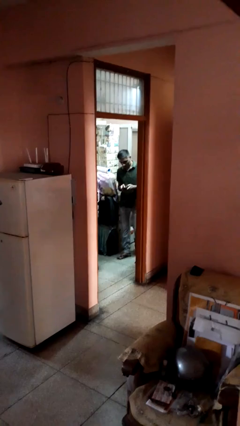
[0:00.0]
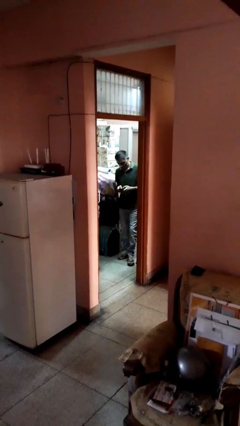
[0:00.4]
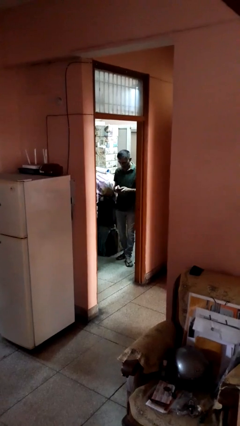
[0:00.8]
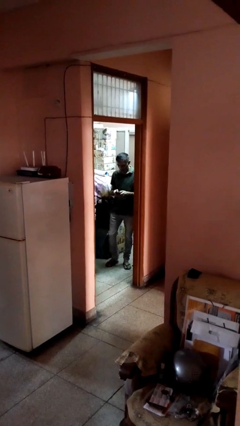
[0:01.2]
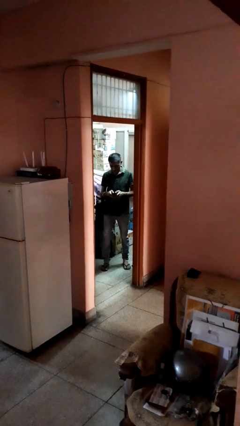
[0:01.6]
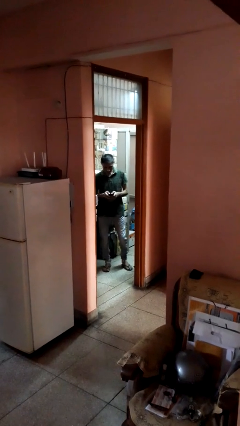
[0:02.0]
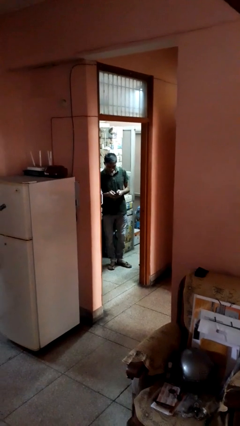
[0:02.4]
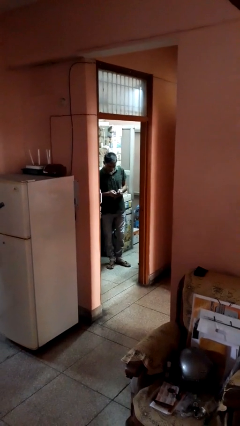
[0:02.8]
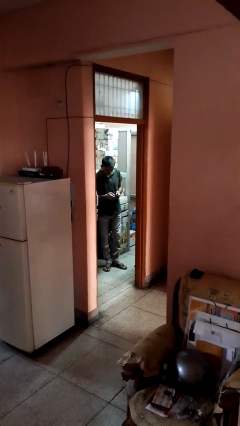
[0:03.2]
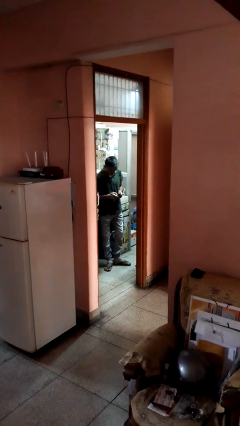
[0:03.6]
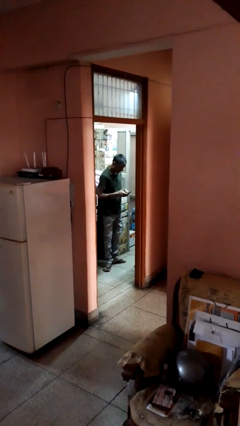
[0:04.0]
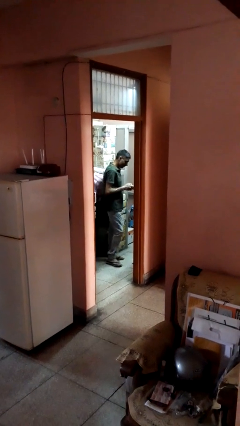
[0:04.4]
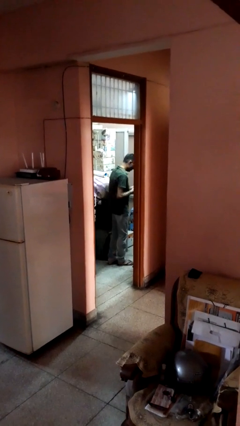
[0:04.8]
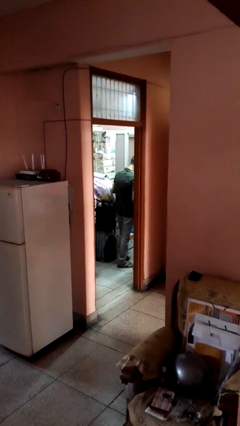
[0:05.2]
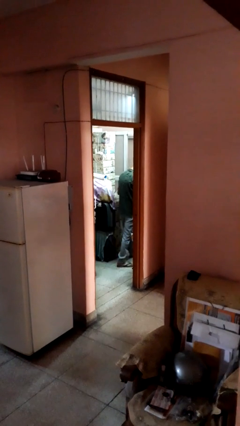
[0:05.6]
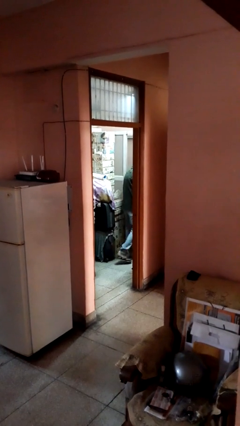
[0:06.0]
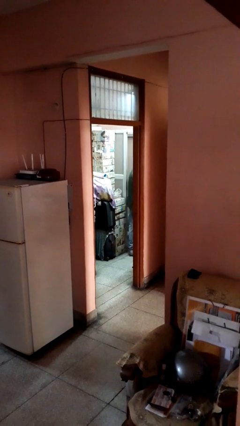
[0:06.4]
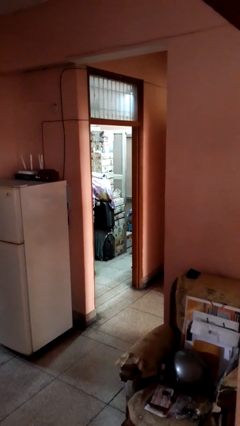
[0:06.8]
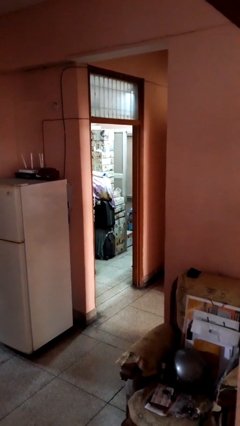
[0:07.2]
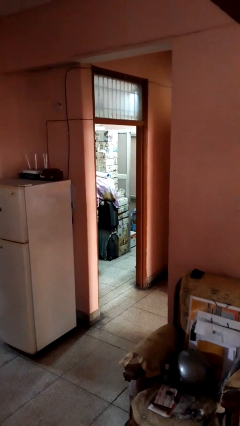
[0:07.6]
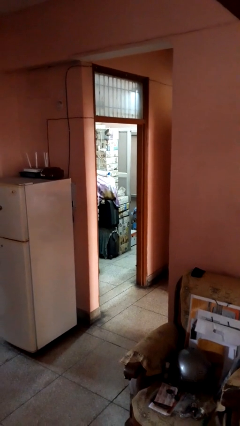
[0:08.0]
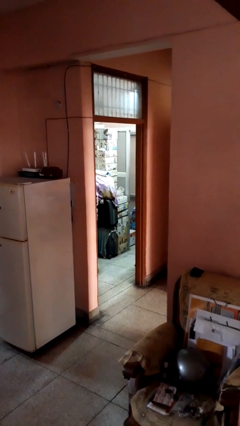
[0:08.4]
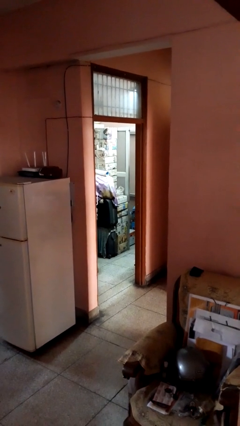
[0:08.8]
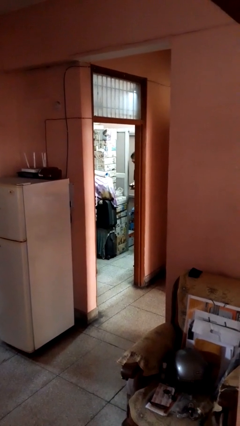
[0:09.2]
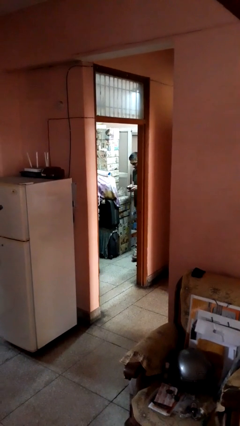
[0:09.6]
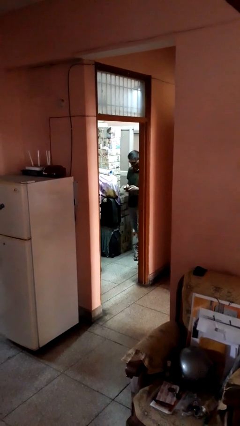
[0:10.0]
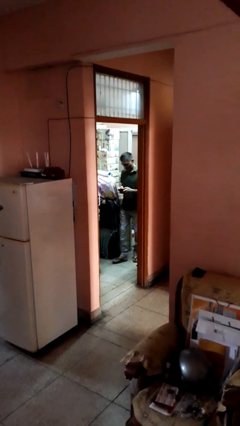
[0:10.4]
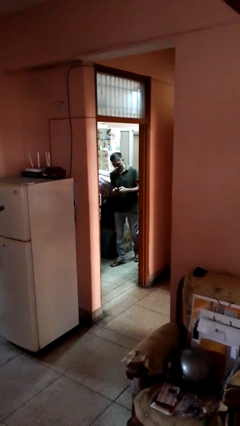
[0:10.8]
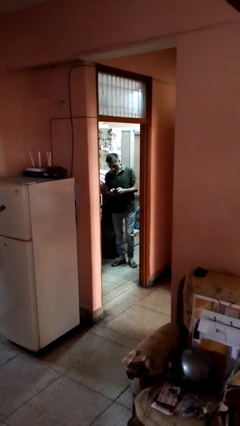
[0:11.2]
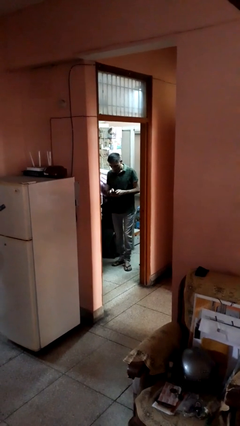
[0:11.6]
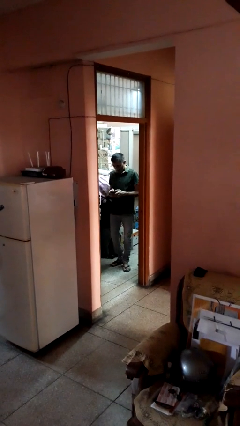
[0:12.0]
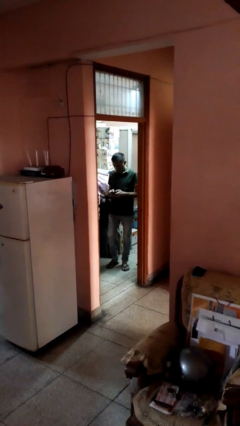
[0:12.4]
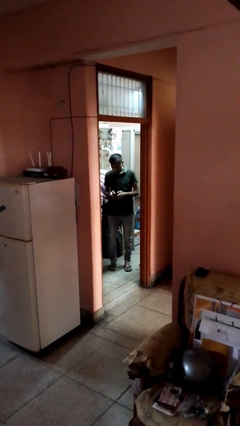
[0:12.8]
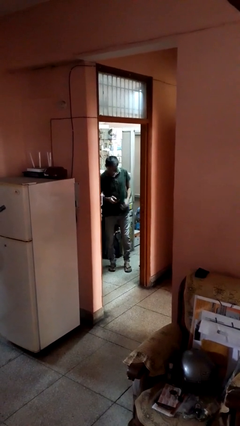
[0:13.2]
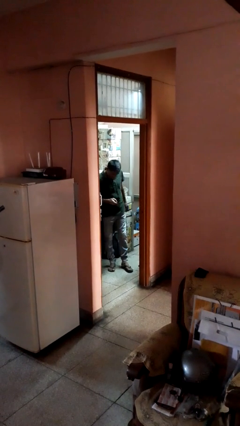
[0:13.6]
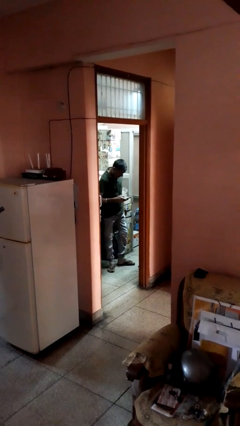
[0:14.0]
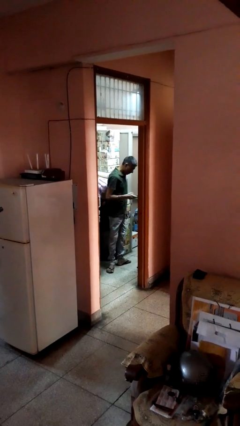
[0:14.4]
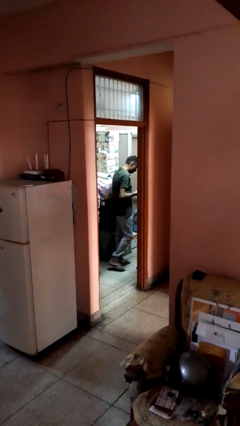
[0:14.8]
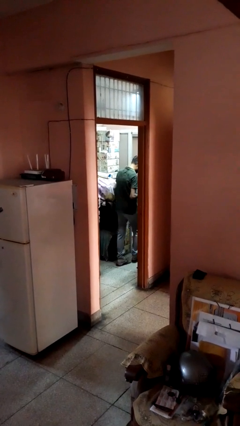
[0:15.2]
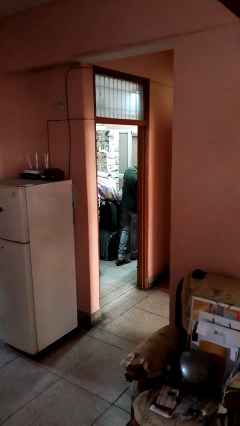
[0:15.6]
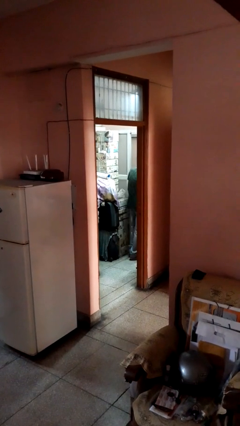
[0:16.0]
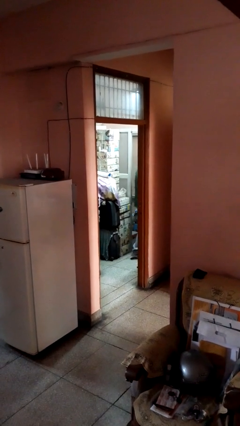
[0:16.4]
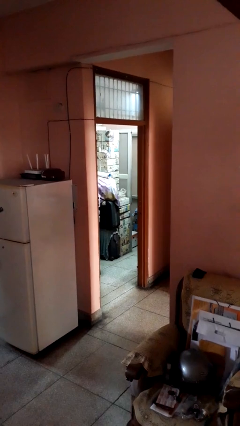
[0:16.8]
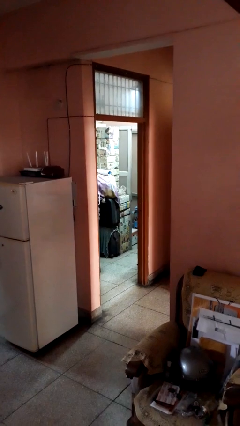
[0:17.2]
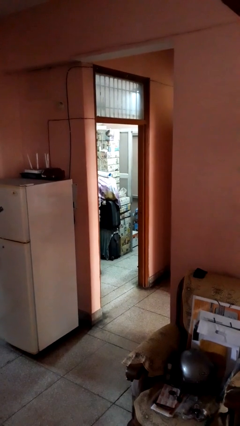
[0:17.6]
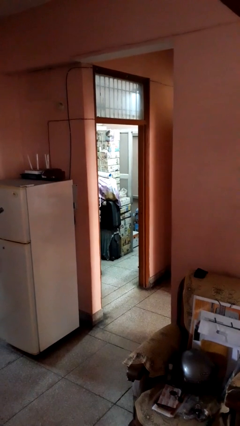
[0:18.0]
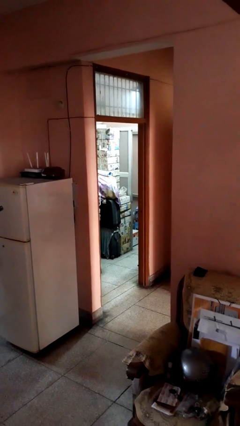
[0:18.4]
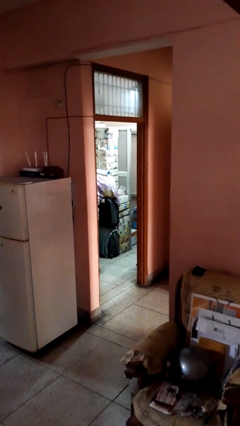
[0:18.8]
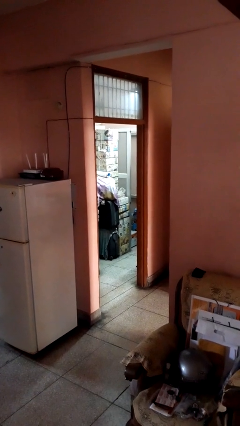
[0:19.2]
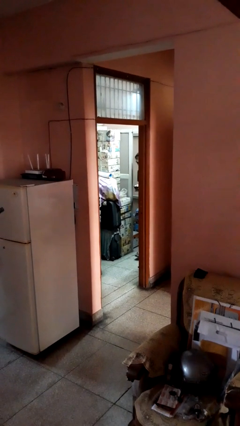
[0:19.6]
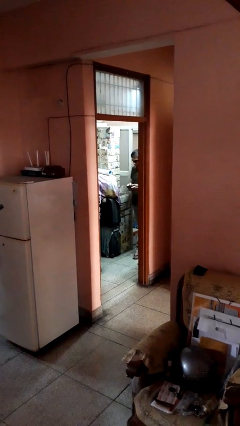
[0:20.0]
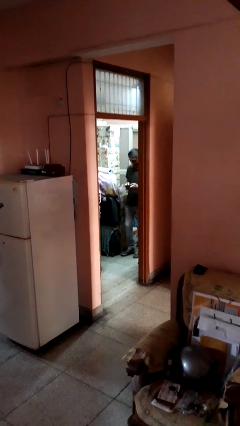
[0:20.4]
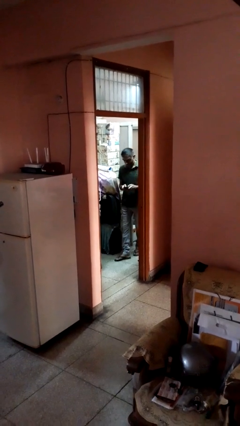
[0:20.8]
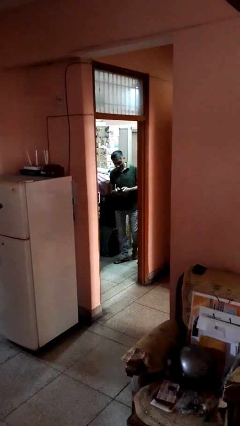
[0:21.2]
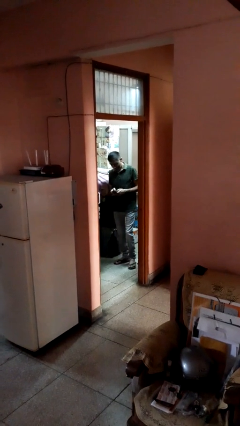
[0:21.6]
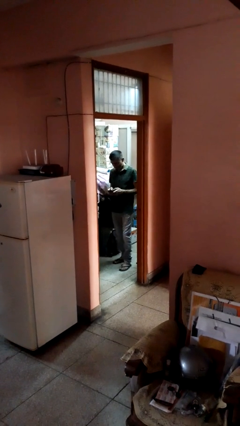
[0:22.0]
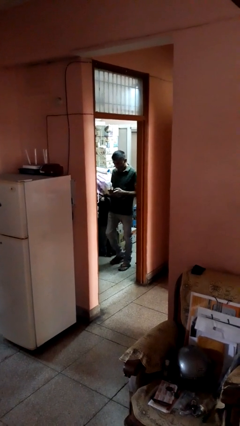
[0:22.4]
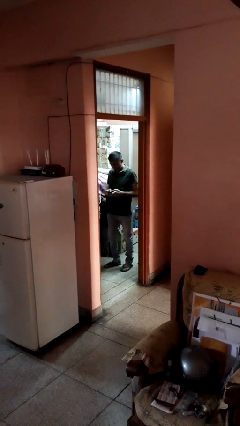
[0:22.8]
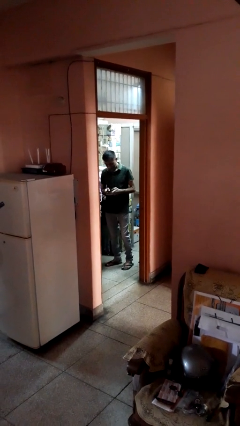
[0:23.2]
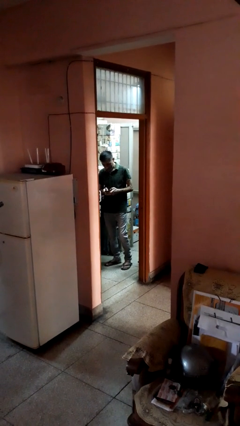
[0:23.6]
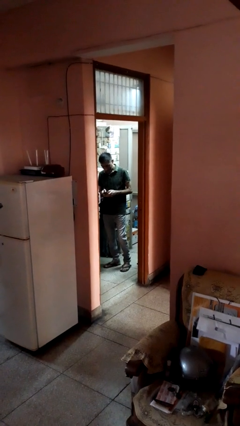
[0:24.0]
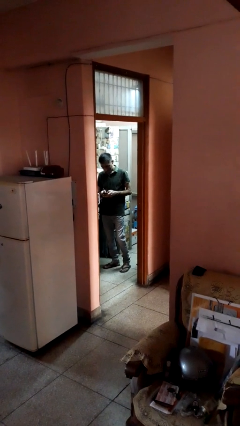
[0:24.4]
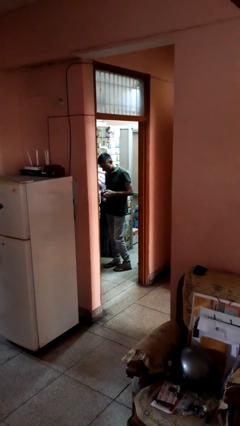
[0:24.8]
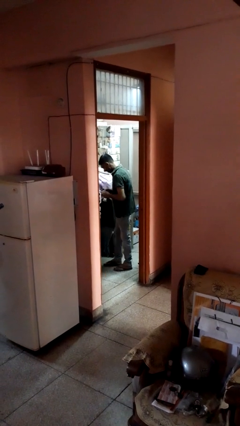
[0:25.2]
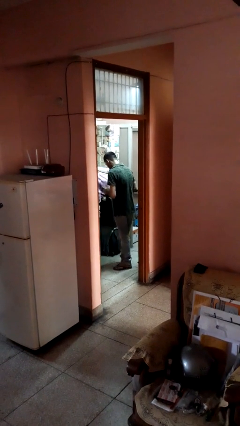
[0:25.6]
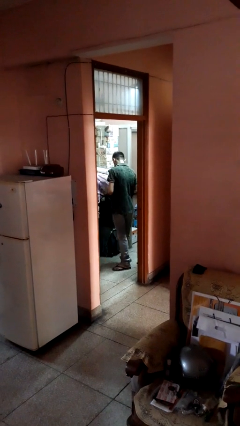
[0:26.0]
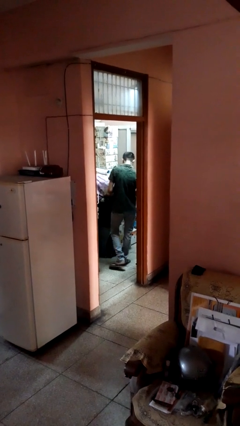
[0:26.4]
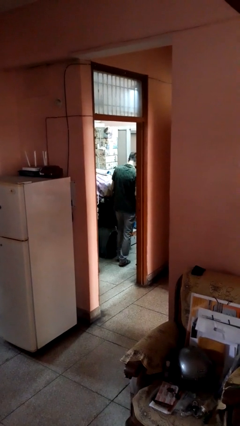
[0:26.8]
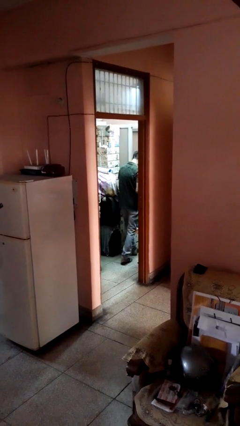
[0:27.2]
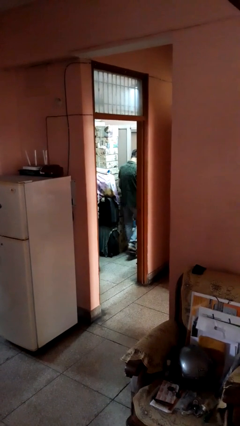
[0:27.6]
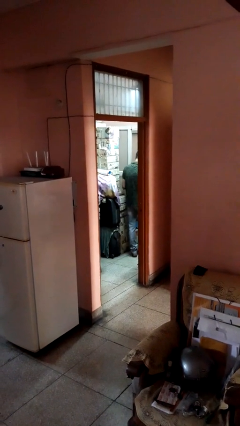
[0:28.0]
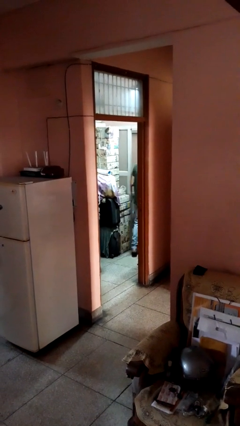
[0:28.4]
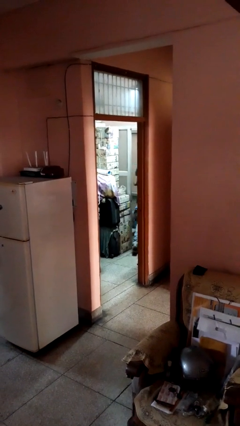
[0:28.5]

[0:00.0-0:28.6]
person texts on phone

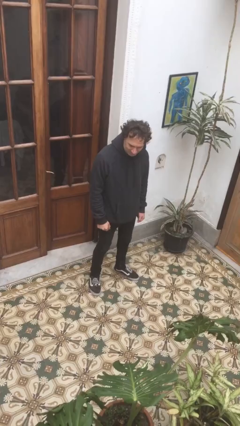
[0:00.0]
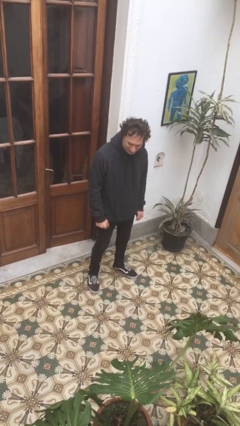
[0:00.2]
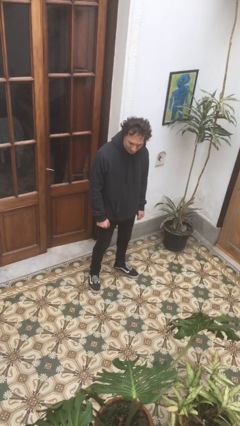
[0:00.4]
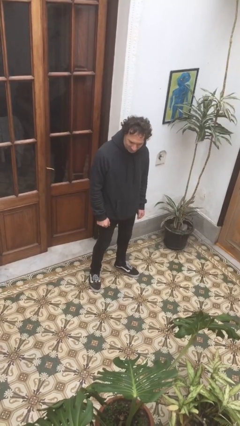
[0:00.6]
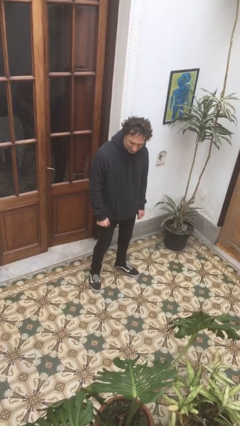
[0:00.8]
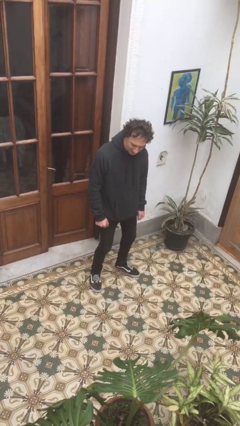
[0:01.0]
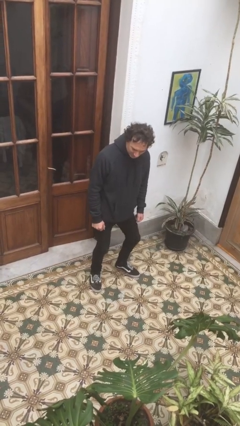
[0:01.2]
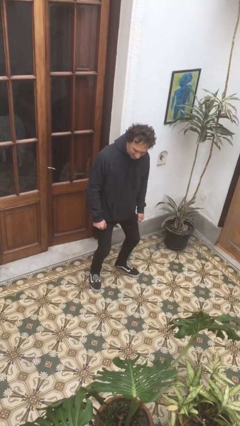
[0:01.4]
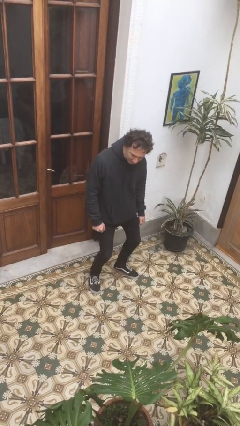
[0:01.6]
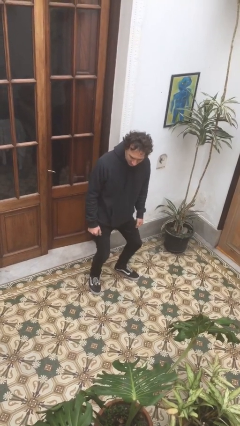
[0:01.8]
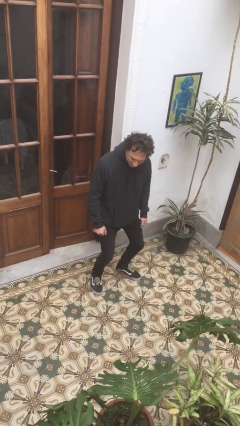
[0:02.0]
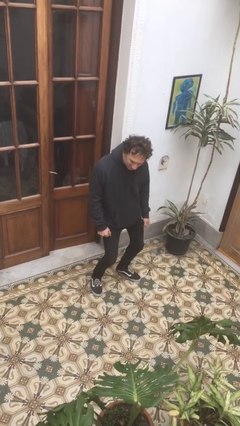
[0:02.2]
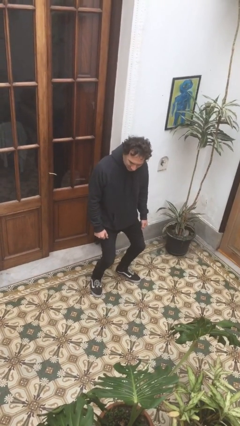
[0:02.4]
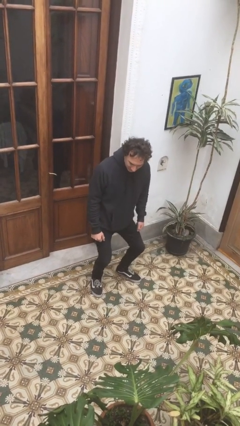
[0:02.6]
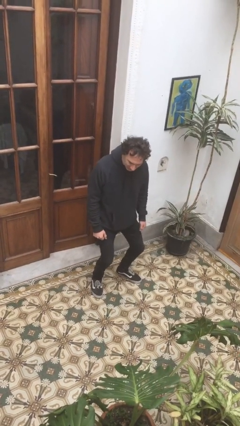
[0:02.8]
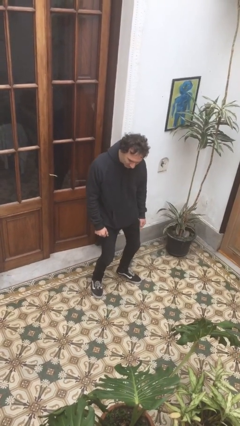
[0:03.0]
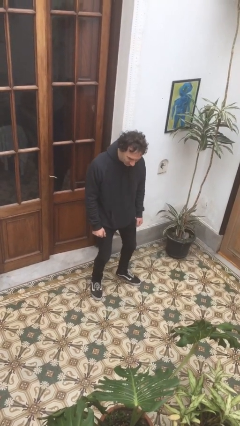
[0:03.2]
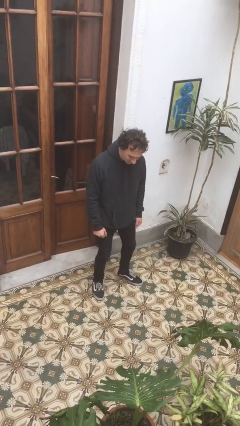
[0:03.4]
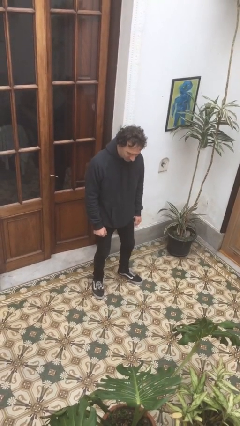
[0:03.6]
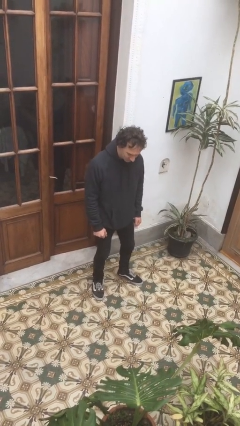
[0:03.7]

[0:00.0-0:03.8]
person wiggles hips
